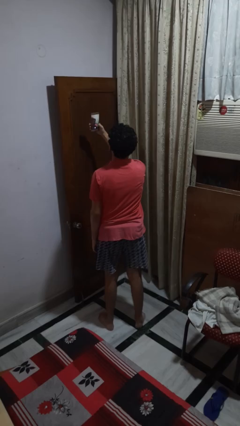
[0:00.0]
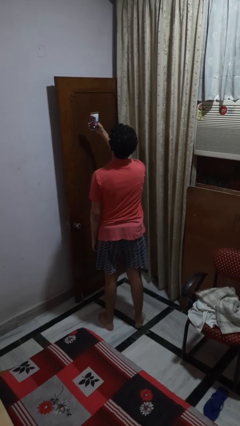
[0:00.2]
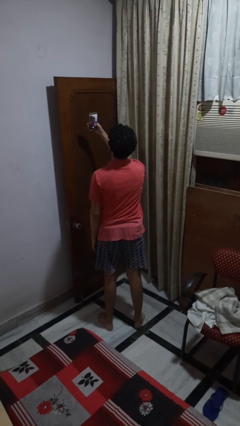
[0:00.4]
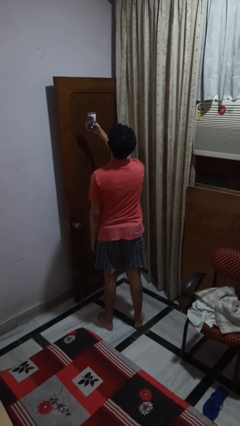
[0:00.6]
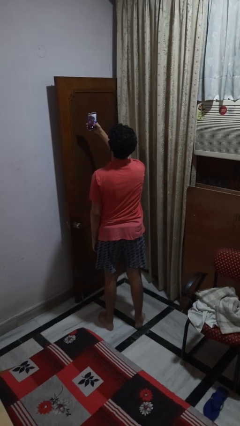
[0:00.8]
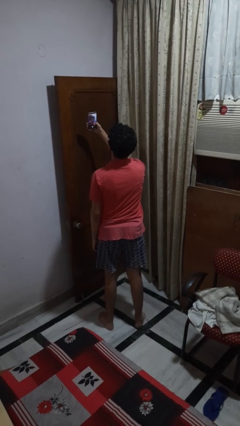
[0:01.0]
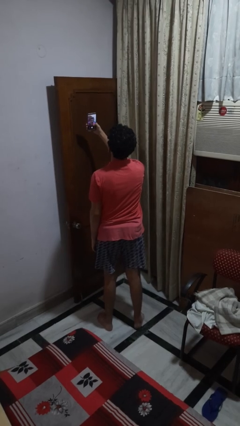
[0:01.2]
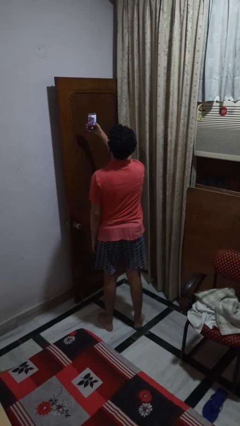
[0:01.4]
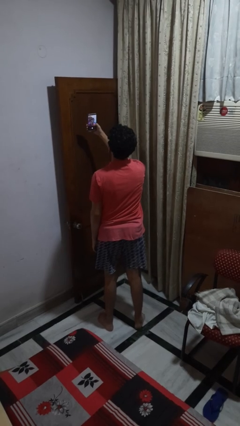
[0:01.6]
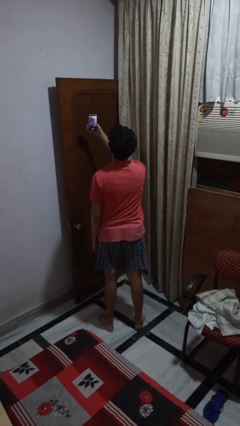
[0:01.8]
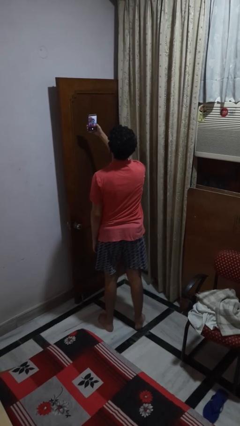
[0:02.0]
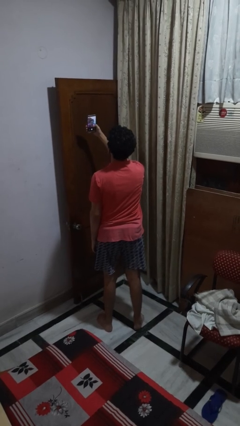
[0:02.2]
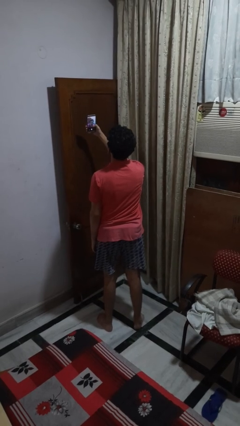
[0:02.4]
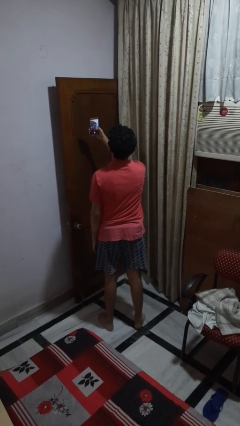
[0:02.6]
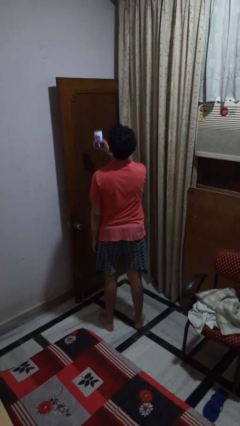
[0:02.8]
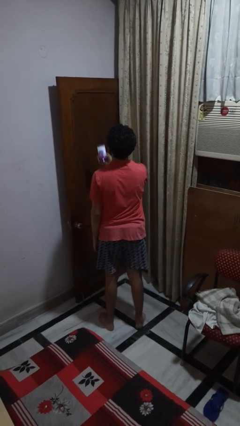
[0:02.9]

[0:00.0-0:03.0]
person takes selfie

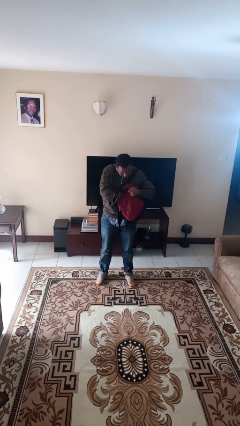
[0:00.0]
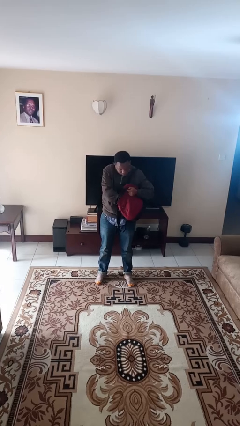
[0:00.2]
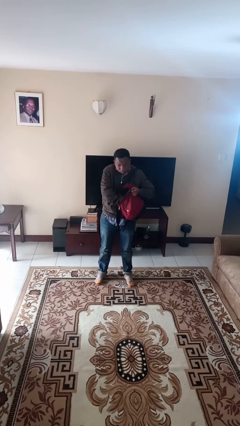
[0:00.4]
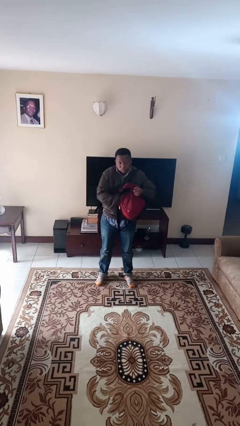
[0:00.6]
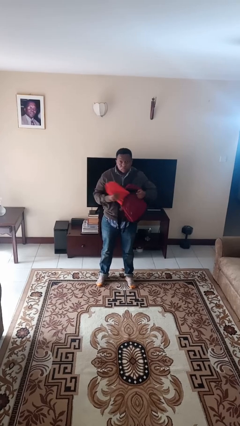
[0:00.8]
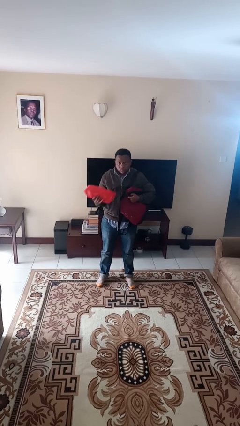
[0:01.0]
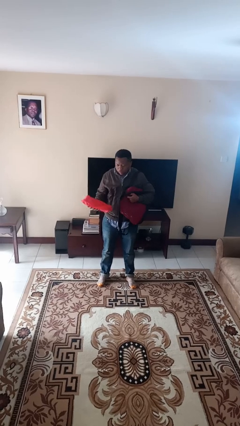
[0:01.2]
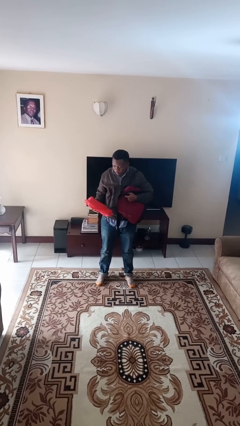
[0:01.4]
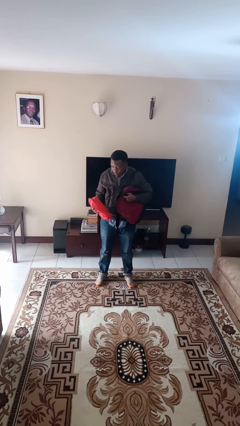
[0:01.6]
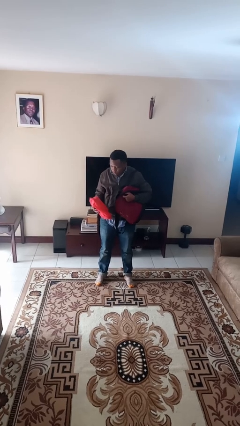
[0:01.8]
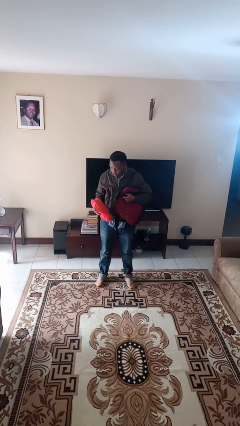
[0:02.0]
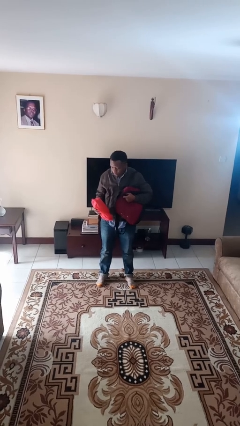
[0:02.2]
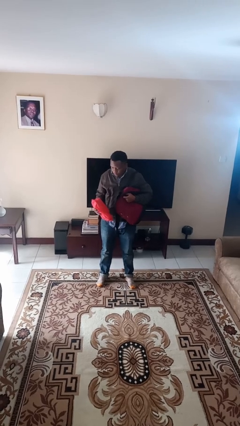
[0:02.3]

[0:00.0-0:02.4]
person takes object from backpack

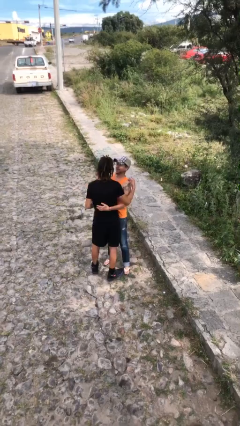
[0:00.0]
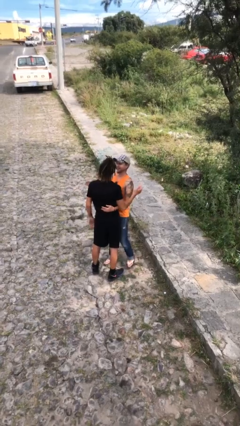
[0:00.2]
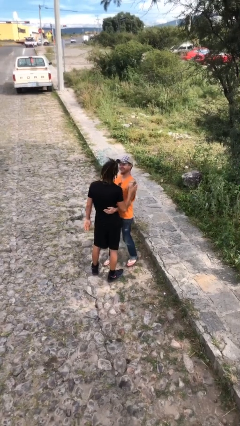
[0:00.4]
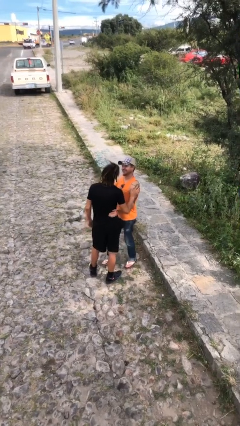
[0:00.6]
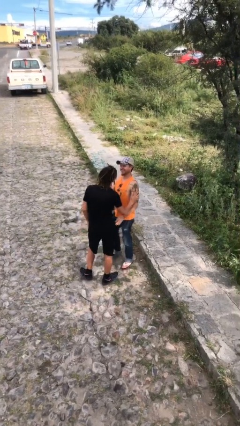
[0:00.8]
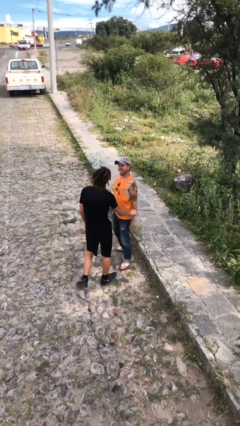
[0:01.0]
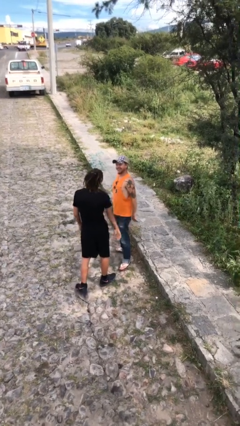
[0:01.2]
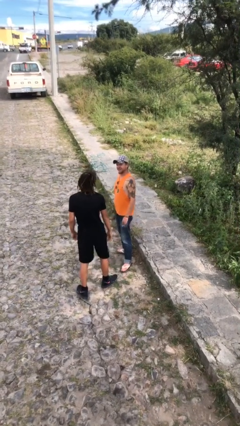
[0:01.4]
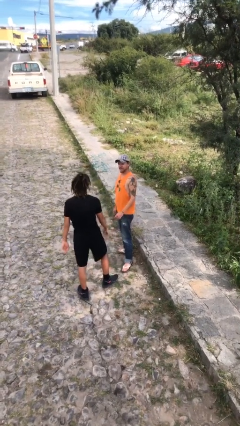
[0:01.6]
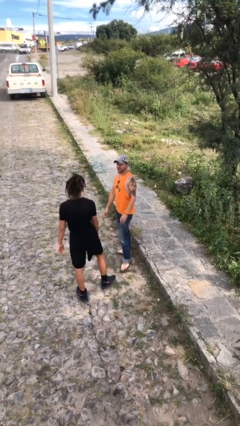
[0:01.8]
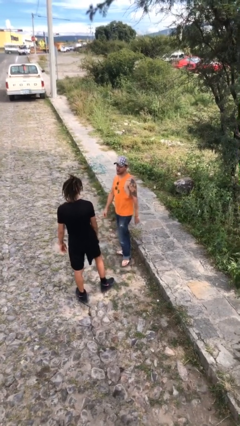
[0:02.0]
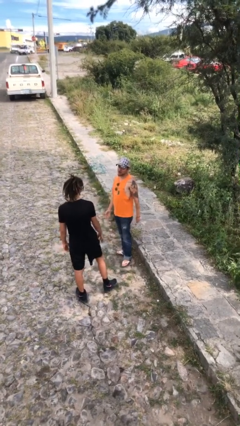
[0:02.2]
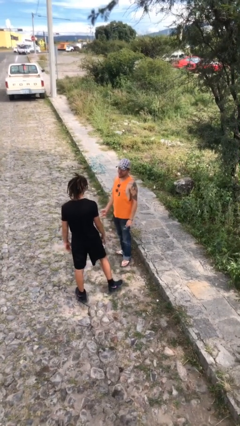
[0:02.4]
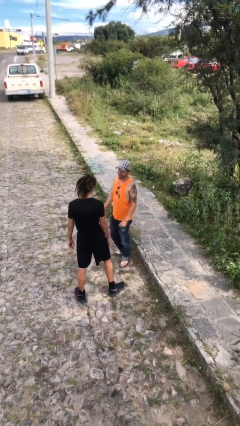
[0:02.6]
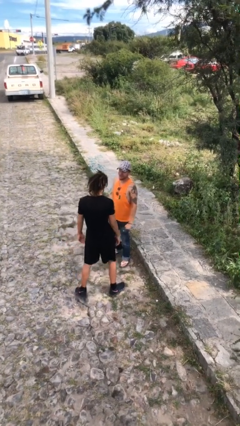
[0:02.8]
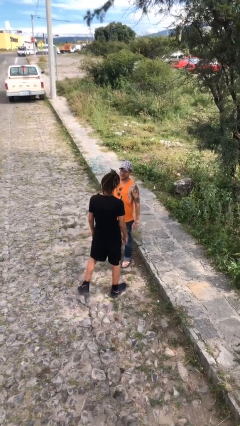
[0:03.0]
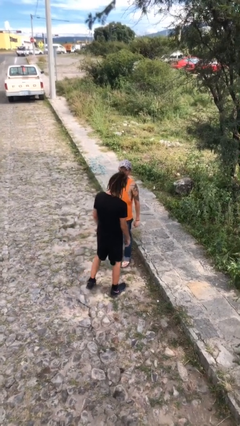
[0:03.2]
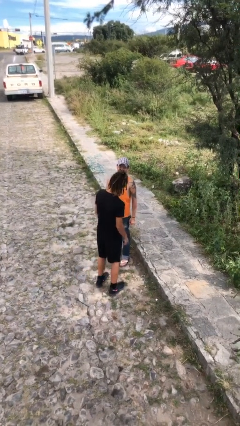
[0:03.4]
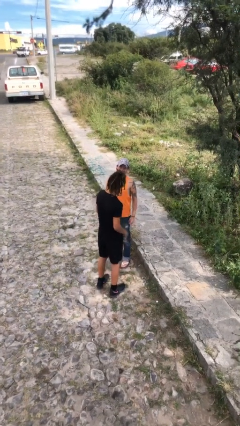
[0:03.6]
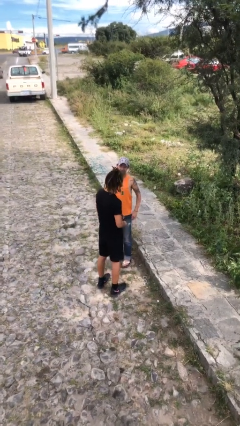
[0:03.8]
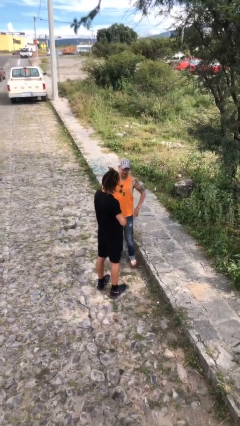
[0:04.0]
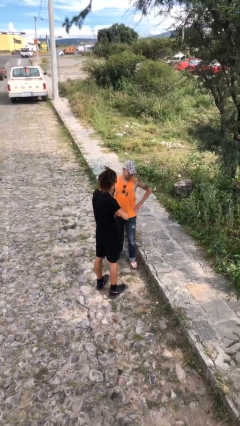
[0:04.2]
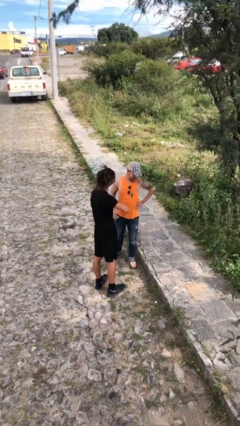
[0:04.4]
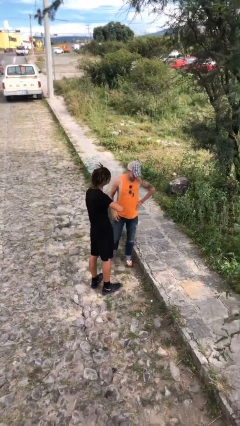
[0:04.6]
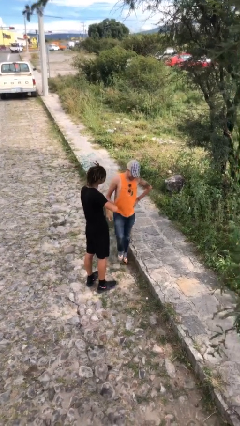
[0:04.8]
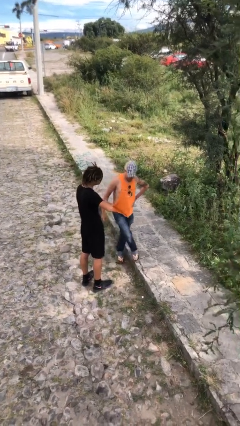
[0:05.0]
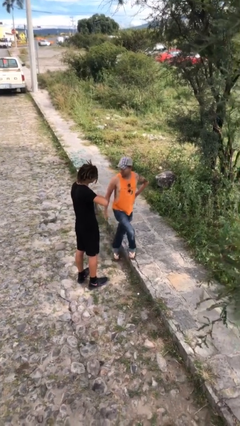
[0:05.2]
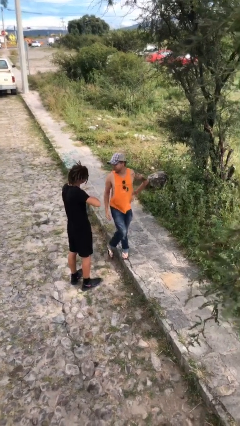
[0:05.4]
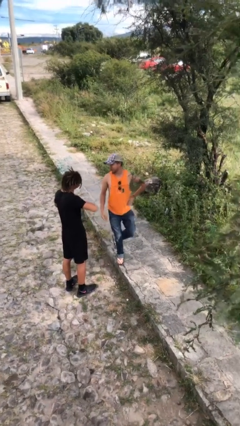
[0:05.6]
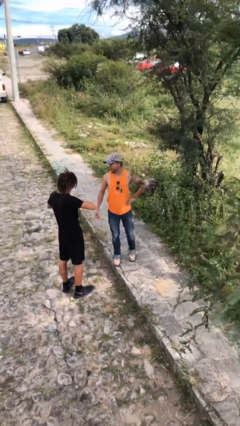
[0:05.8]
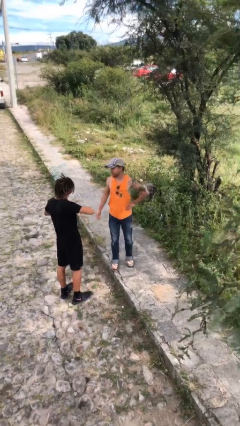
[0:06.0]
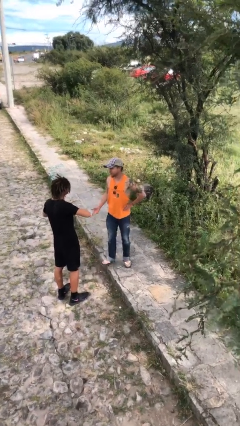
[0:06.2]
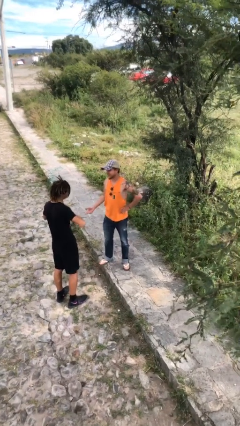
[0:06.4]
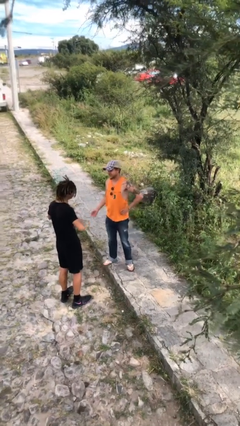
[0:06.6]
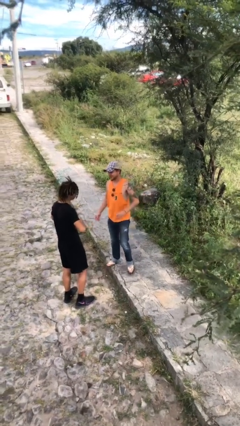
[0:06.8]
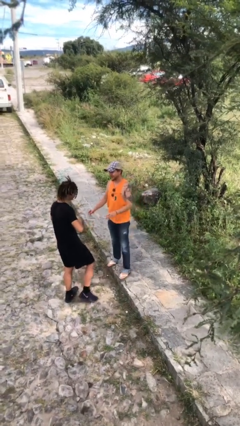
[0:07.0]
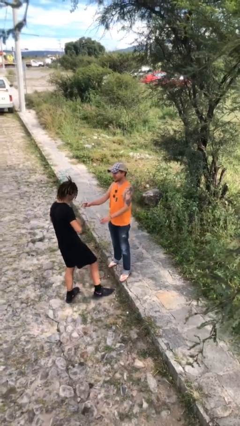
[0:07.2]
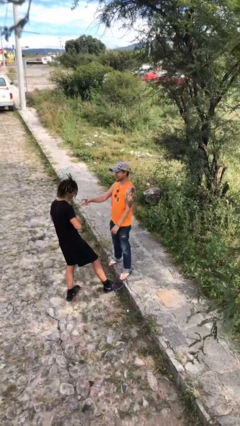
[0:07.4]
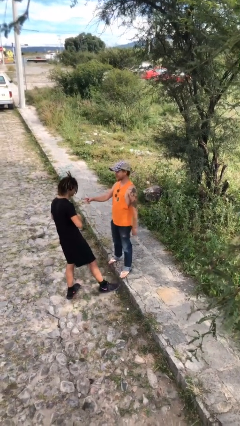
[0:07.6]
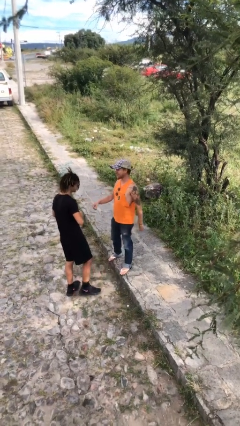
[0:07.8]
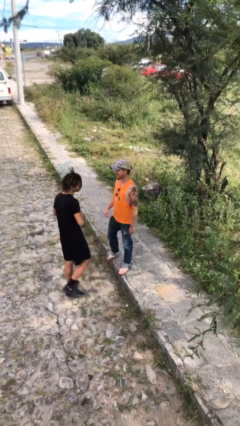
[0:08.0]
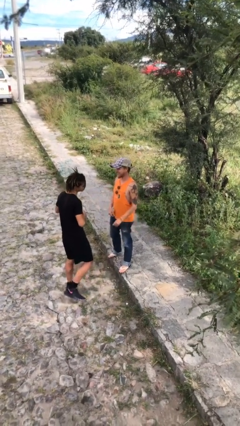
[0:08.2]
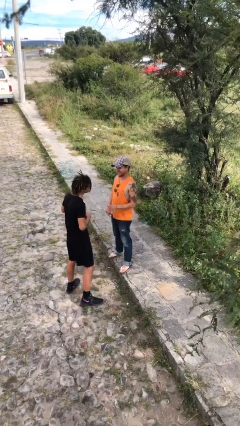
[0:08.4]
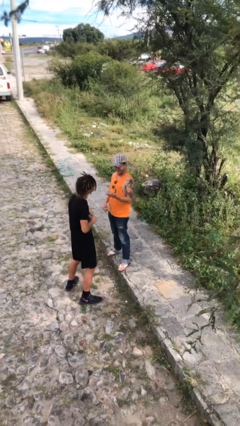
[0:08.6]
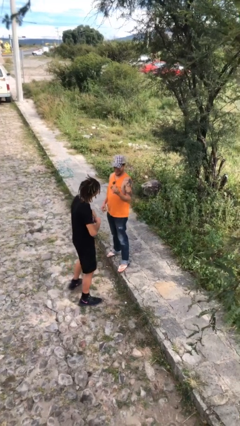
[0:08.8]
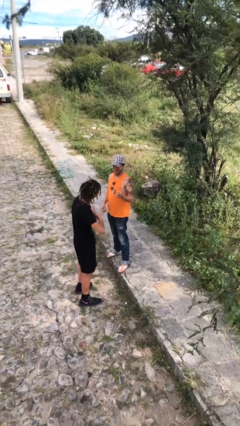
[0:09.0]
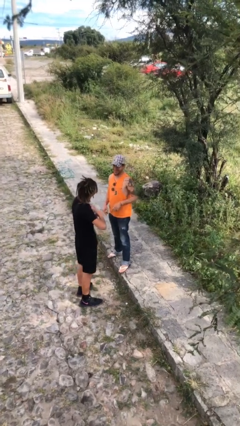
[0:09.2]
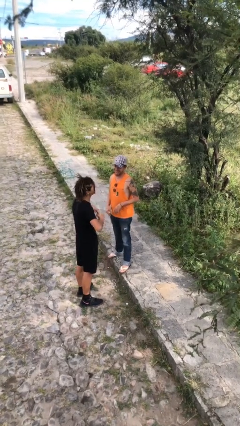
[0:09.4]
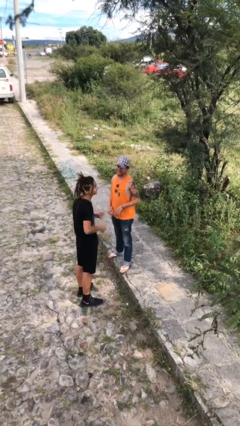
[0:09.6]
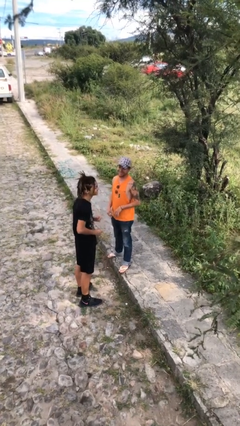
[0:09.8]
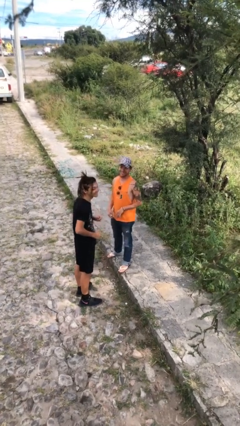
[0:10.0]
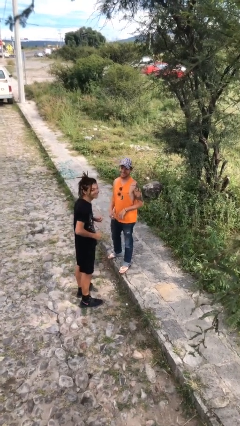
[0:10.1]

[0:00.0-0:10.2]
person talks to person

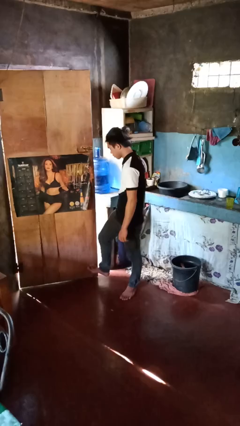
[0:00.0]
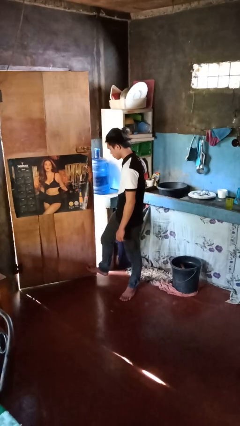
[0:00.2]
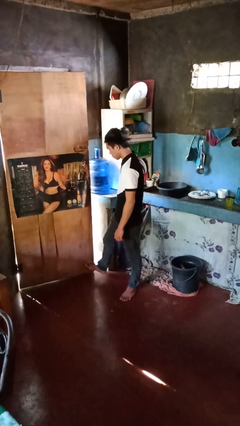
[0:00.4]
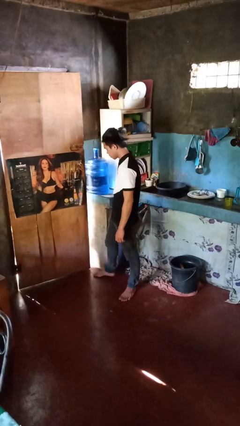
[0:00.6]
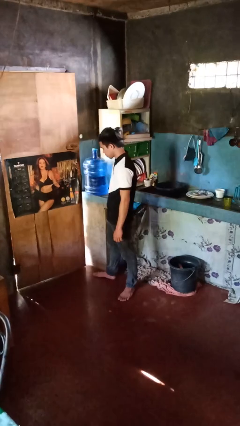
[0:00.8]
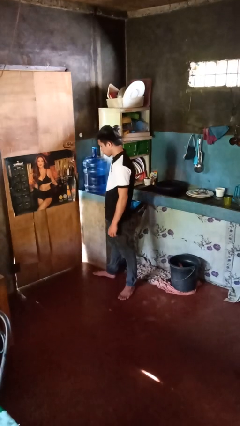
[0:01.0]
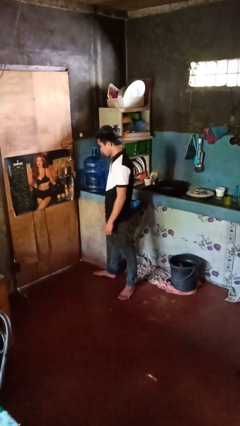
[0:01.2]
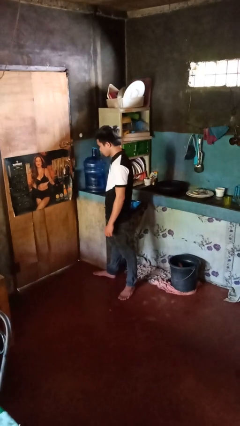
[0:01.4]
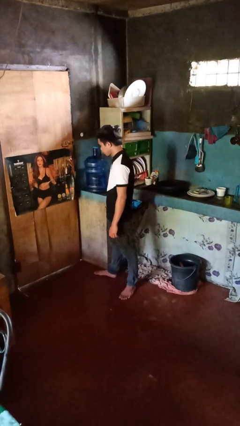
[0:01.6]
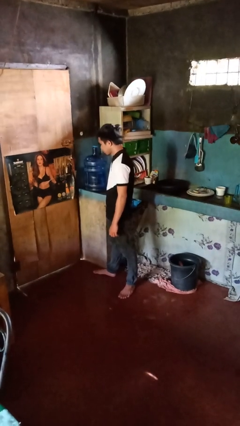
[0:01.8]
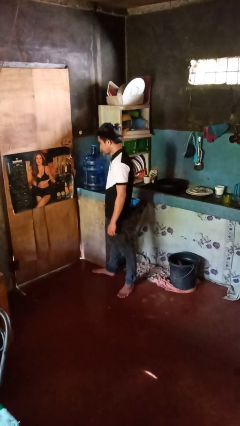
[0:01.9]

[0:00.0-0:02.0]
person closes door with foot
